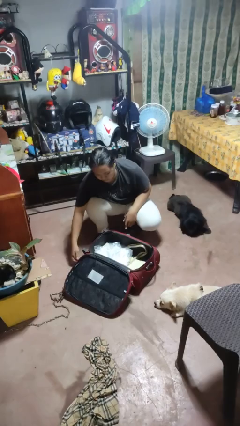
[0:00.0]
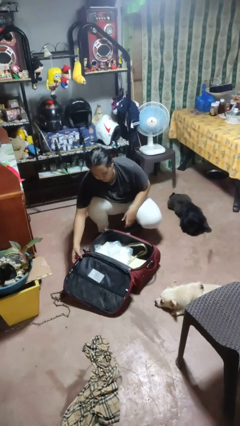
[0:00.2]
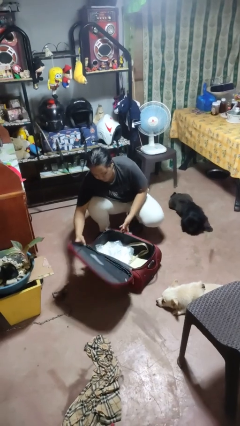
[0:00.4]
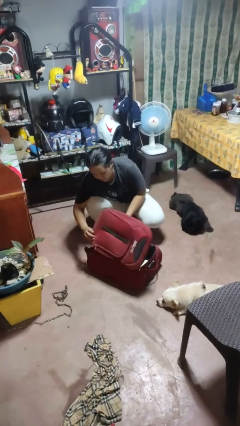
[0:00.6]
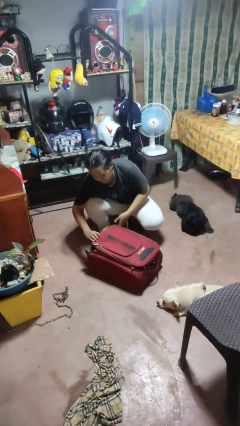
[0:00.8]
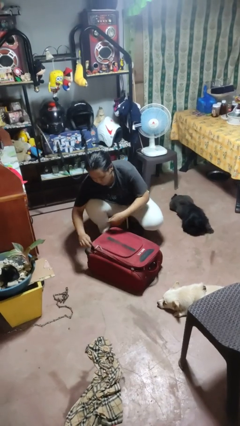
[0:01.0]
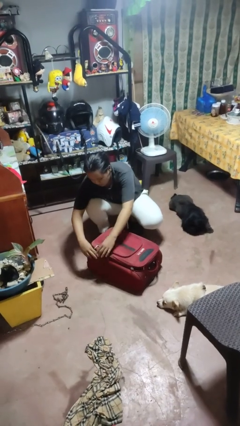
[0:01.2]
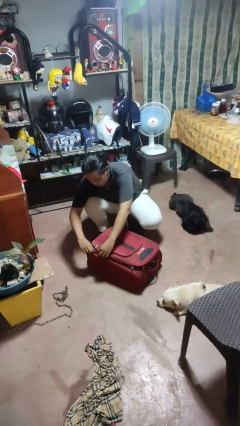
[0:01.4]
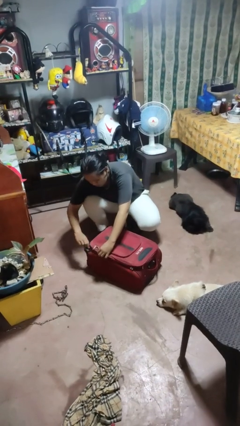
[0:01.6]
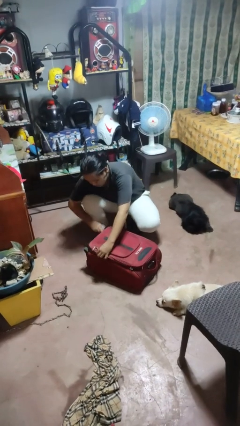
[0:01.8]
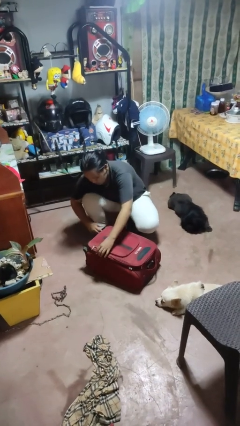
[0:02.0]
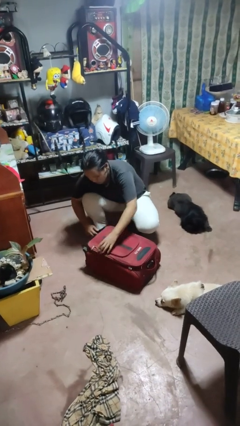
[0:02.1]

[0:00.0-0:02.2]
person closes suitcase

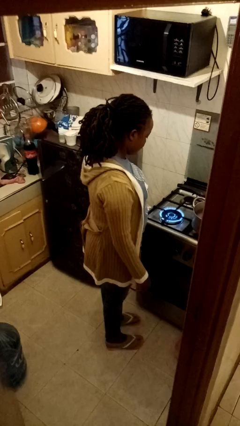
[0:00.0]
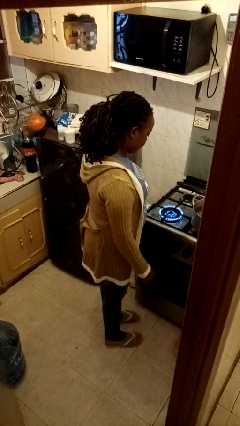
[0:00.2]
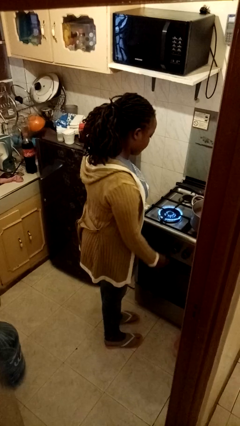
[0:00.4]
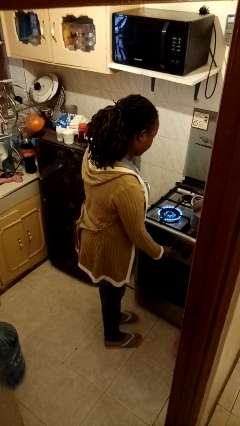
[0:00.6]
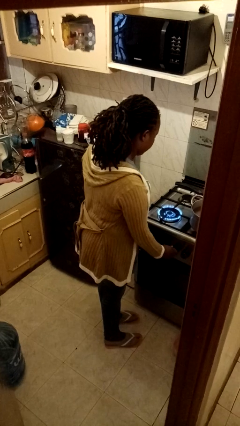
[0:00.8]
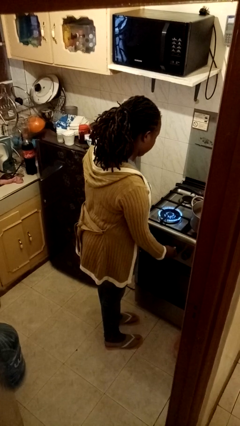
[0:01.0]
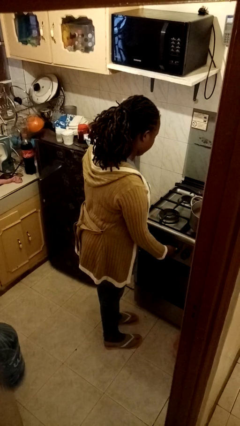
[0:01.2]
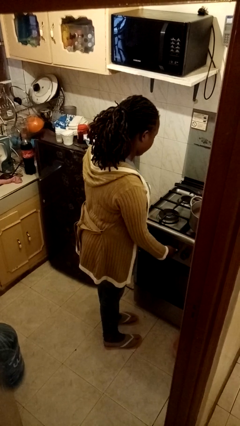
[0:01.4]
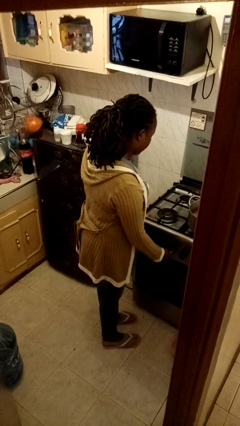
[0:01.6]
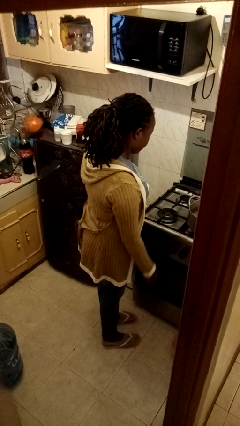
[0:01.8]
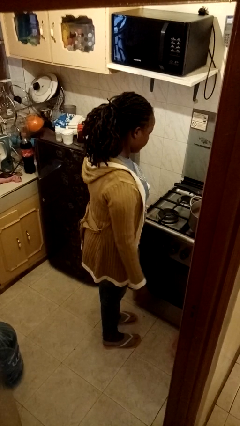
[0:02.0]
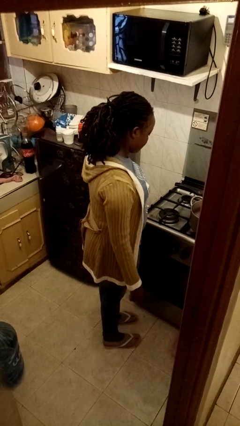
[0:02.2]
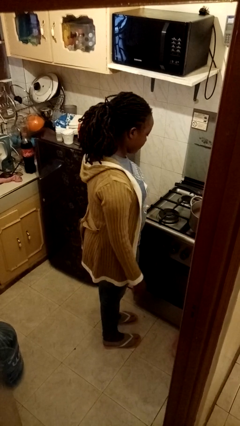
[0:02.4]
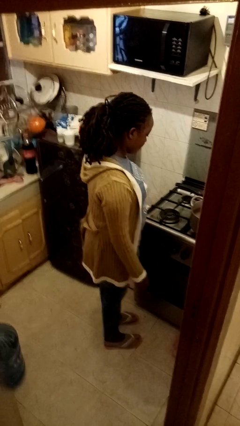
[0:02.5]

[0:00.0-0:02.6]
person turns off stovetop

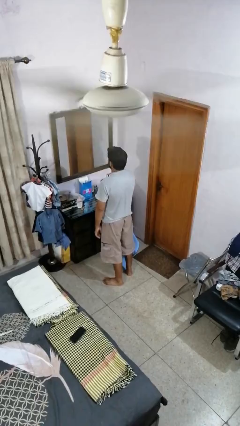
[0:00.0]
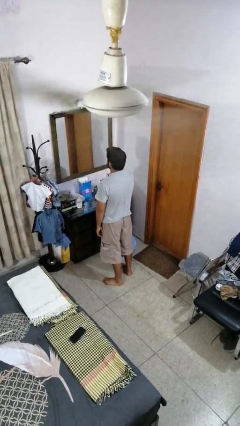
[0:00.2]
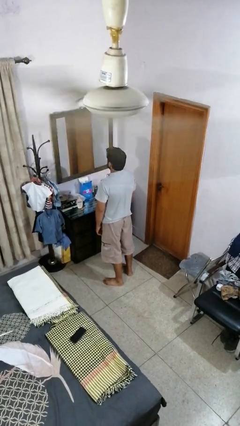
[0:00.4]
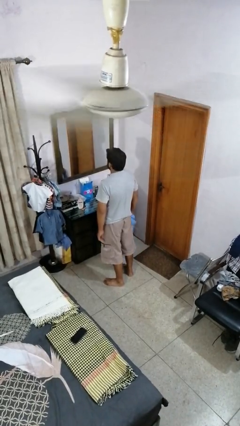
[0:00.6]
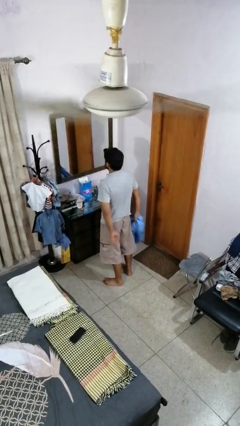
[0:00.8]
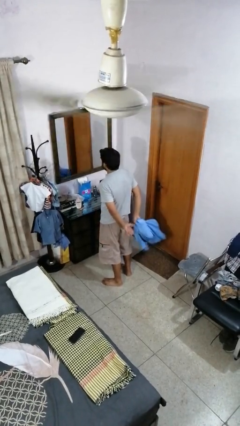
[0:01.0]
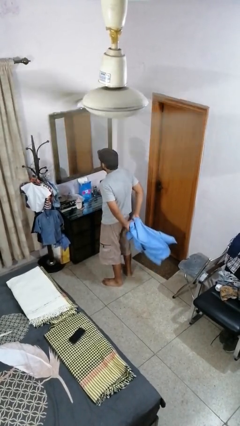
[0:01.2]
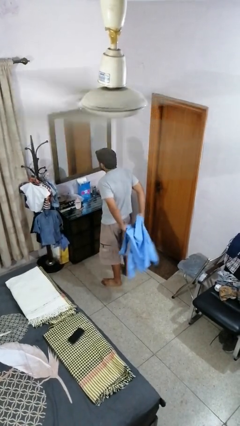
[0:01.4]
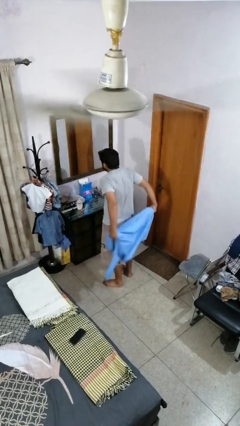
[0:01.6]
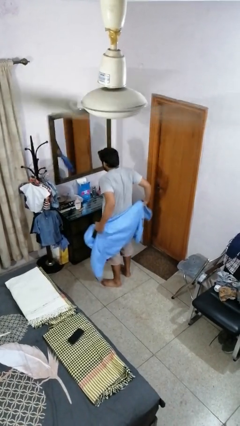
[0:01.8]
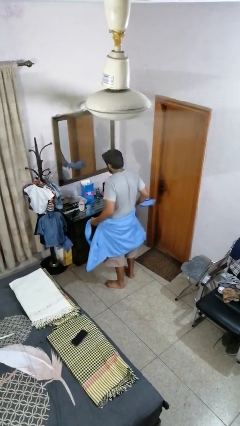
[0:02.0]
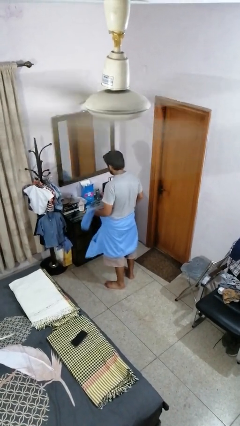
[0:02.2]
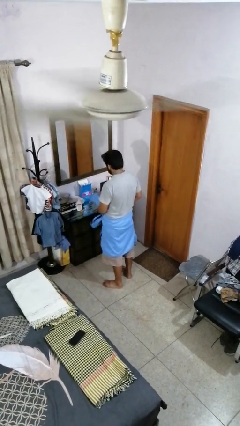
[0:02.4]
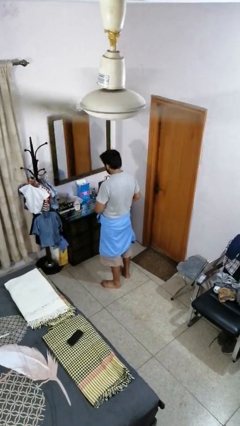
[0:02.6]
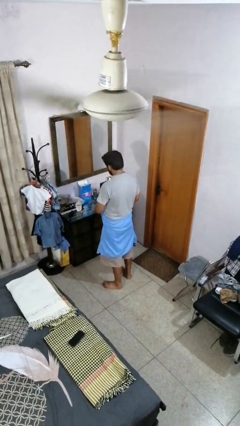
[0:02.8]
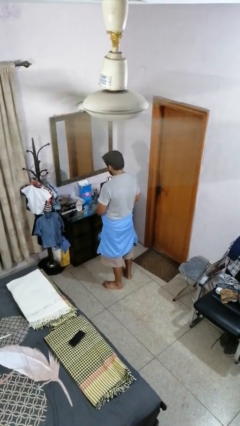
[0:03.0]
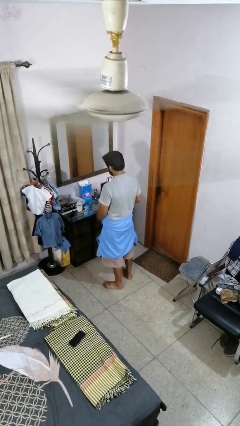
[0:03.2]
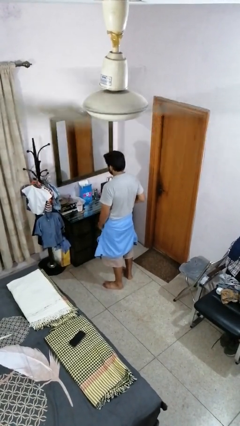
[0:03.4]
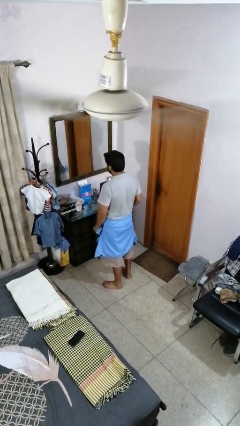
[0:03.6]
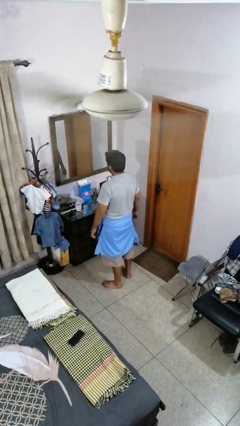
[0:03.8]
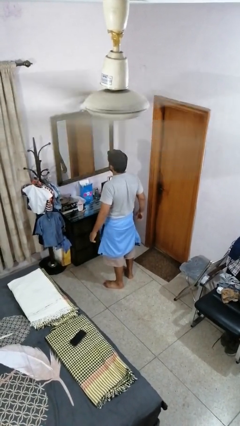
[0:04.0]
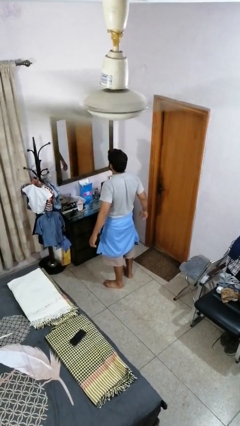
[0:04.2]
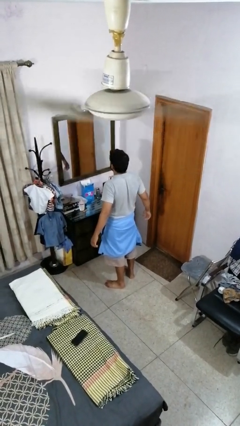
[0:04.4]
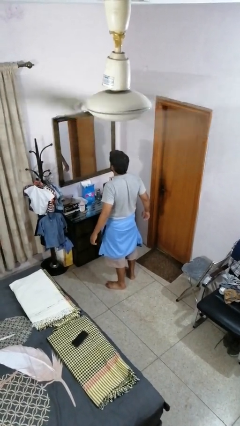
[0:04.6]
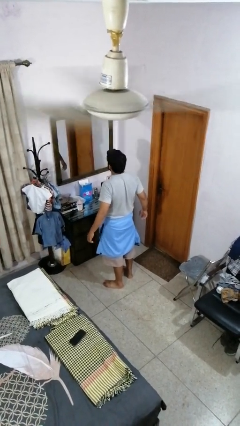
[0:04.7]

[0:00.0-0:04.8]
person ties jacket around waist

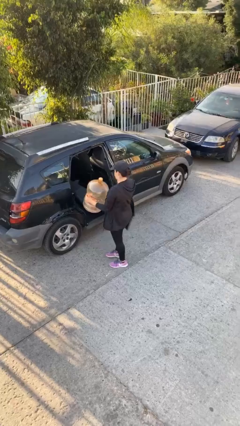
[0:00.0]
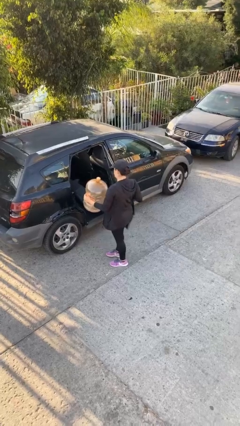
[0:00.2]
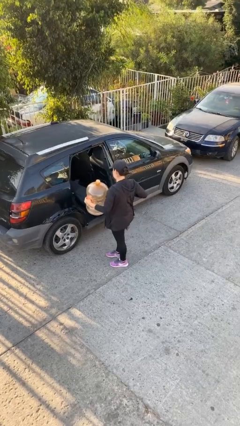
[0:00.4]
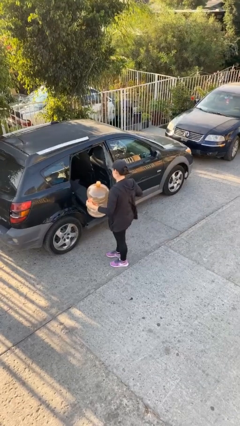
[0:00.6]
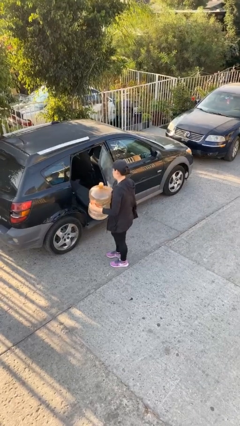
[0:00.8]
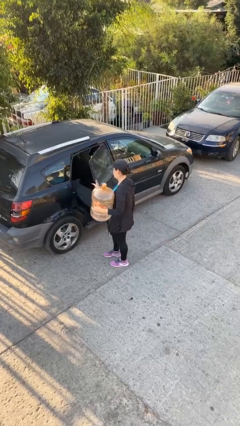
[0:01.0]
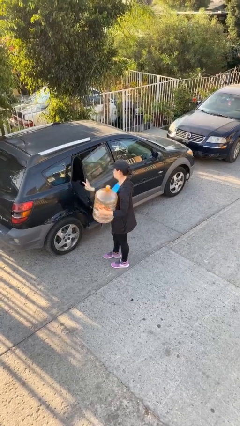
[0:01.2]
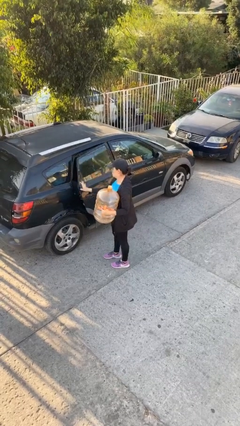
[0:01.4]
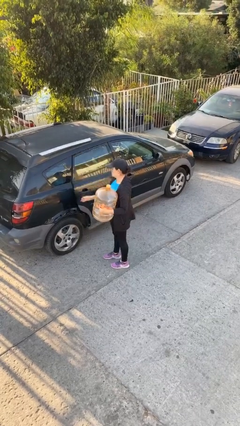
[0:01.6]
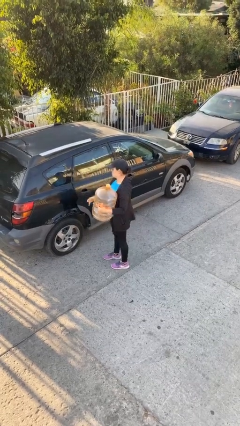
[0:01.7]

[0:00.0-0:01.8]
person closes car door

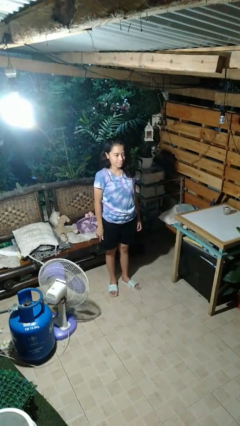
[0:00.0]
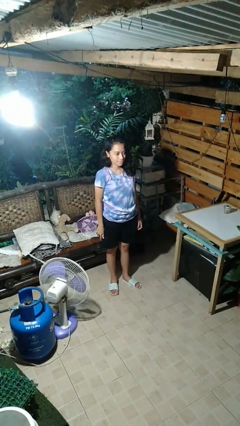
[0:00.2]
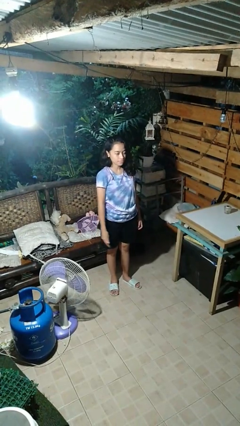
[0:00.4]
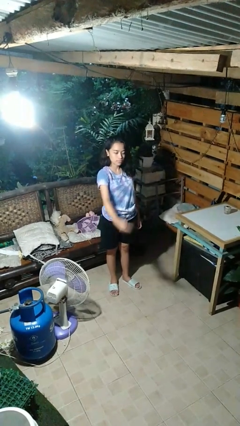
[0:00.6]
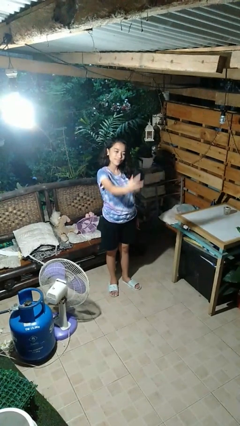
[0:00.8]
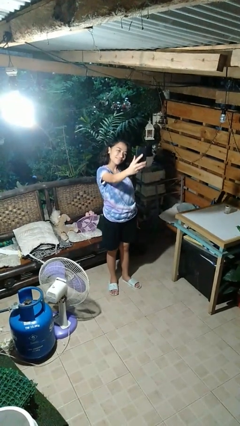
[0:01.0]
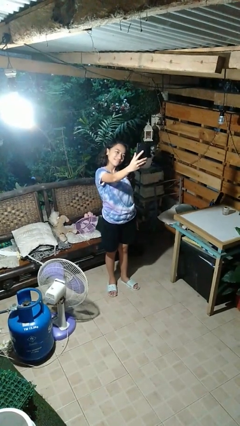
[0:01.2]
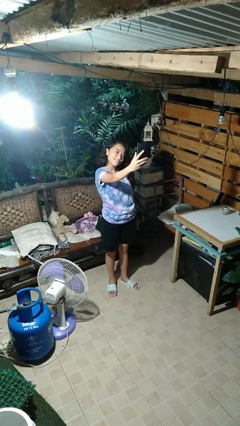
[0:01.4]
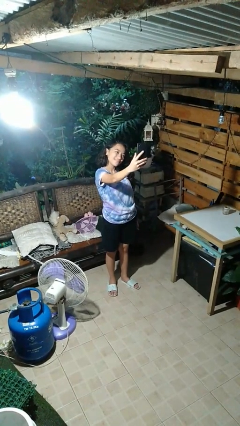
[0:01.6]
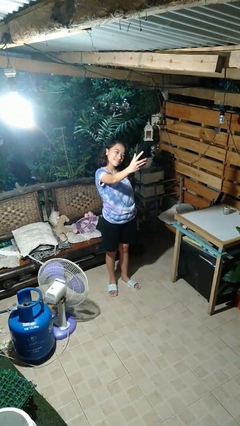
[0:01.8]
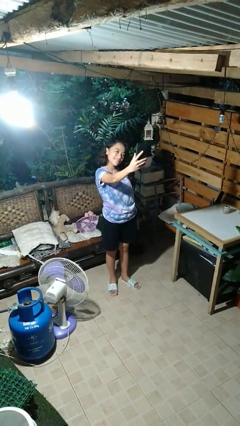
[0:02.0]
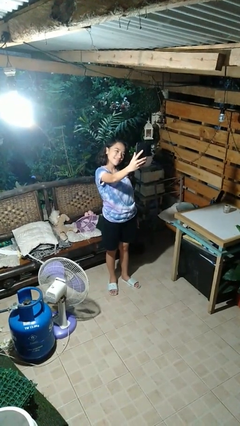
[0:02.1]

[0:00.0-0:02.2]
person takes selfie

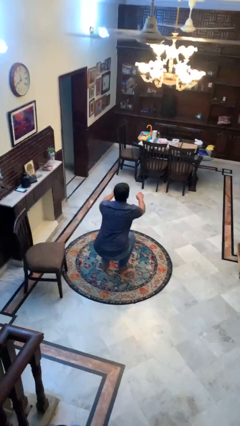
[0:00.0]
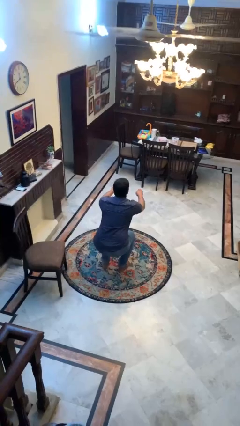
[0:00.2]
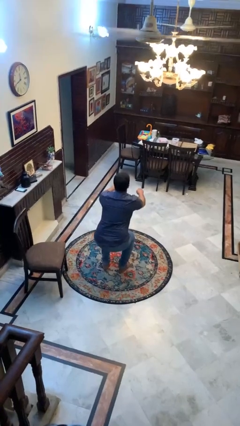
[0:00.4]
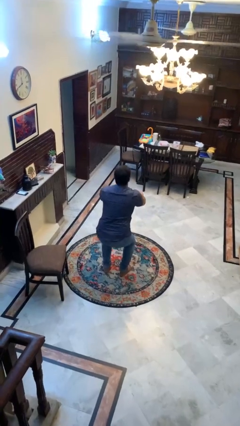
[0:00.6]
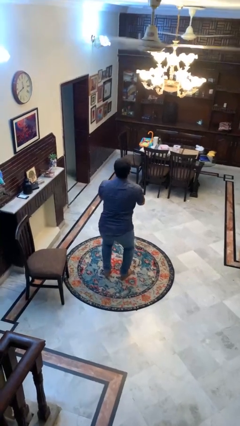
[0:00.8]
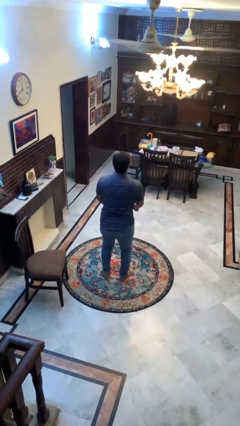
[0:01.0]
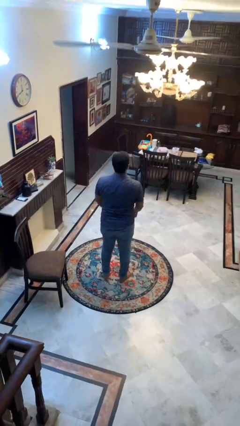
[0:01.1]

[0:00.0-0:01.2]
person stands up

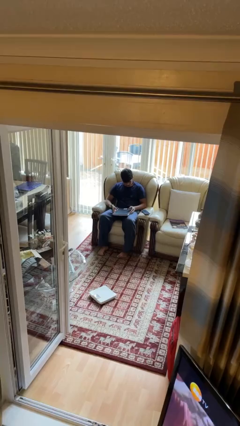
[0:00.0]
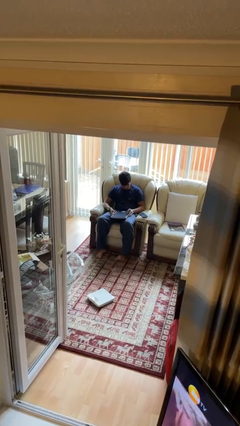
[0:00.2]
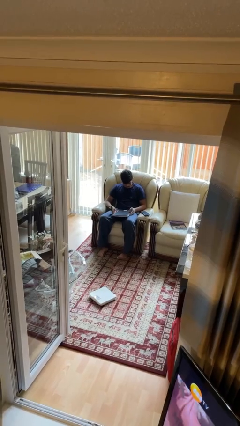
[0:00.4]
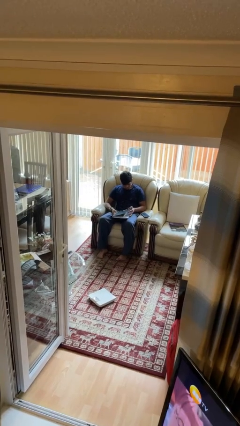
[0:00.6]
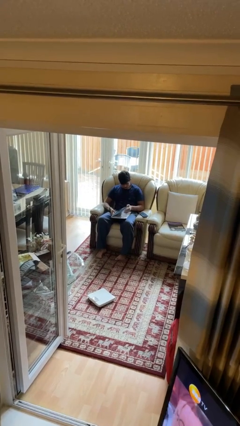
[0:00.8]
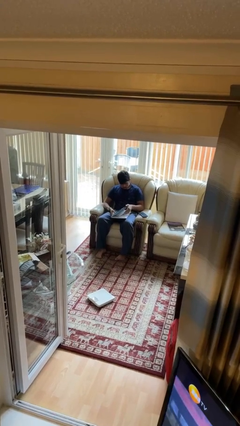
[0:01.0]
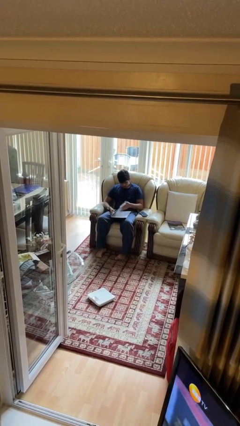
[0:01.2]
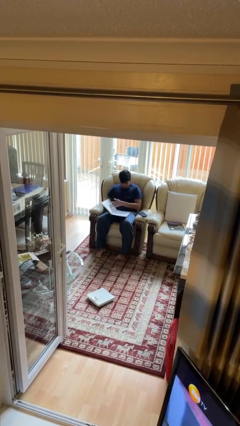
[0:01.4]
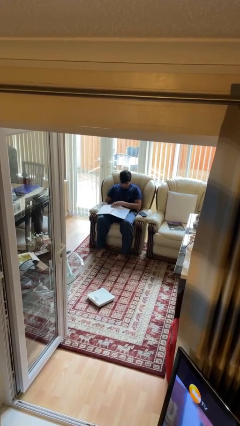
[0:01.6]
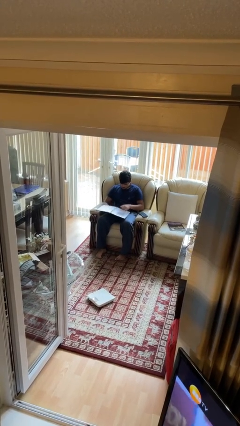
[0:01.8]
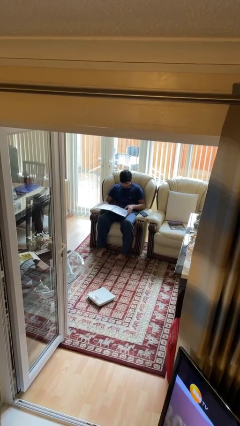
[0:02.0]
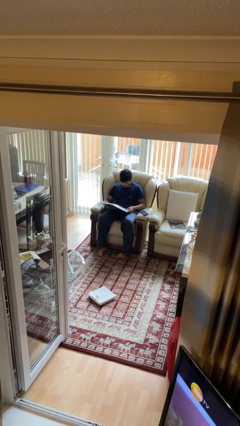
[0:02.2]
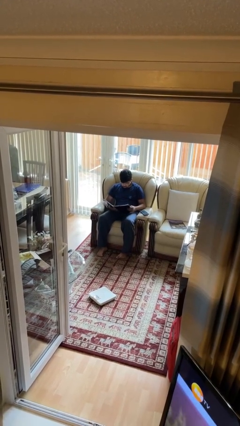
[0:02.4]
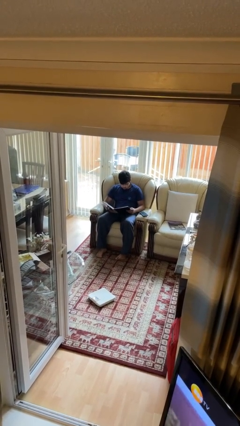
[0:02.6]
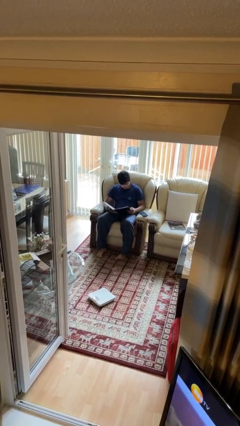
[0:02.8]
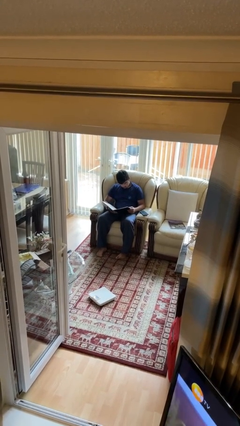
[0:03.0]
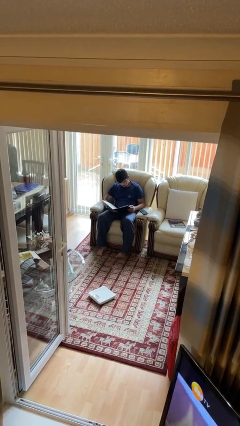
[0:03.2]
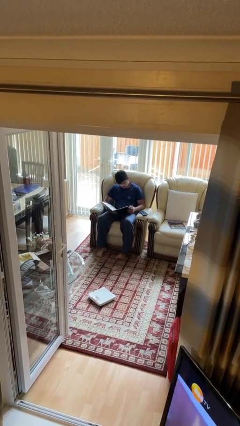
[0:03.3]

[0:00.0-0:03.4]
person reads book
